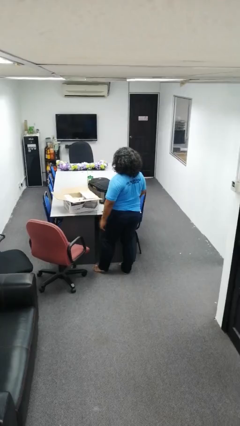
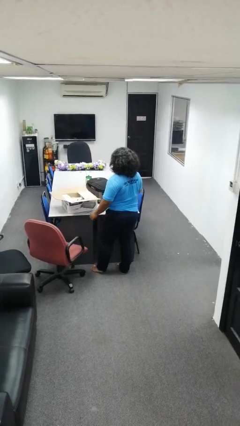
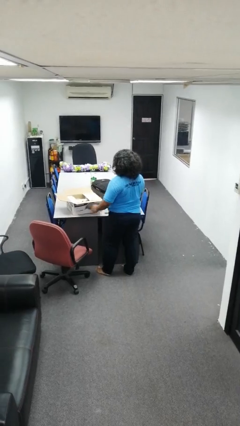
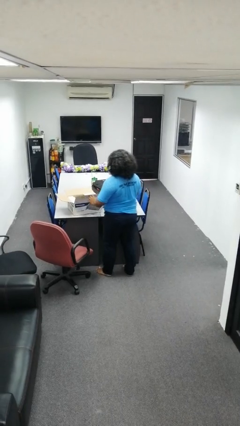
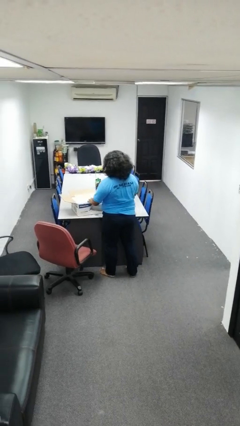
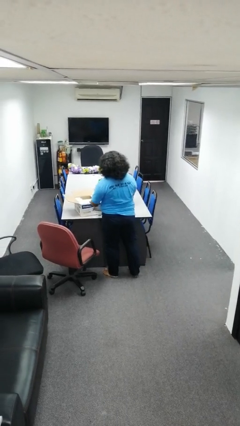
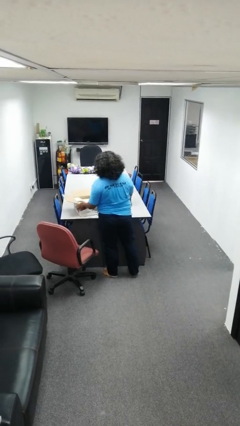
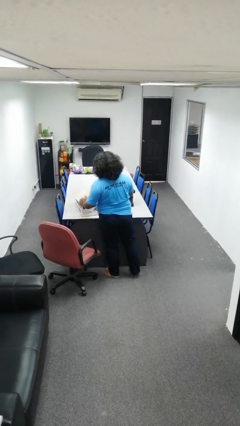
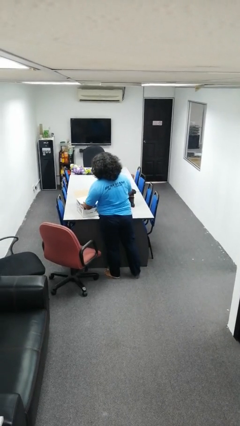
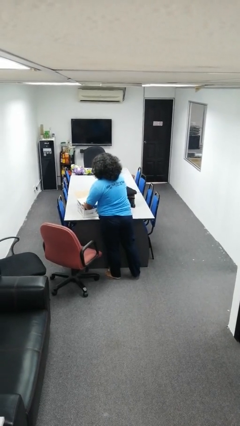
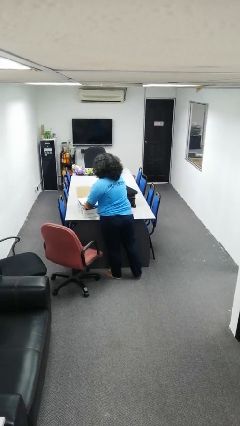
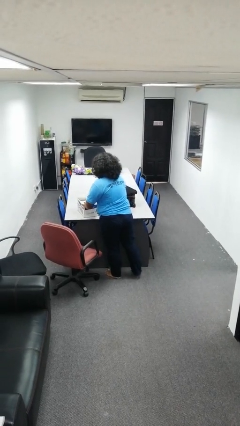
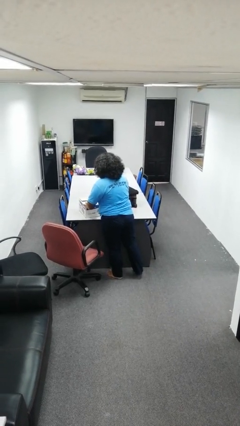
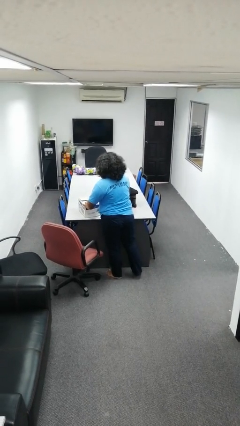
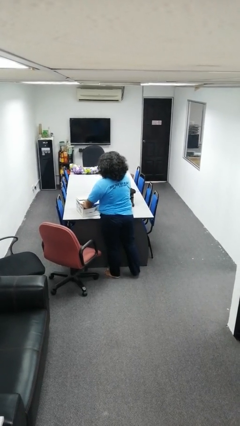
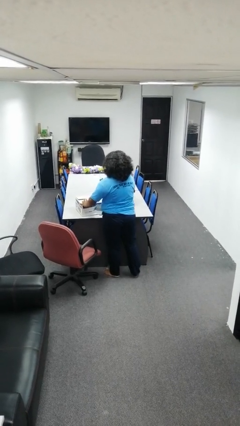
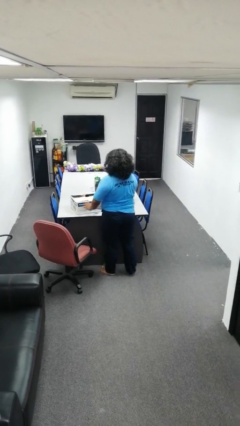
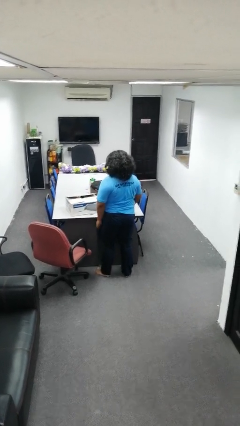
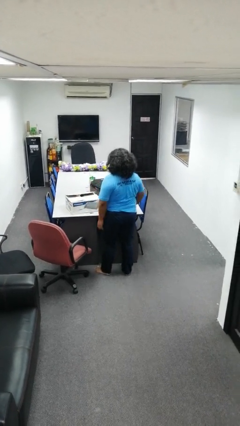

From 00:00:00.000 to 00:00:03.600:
person closes box

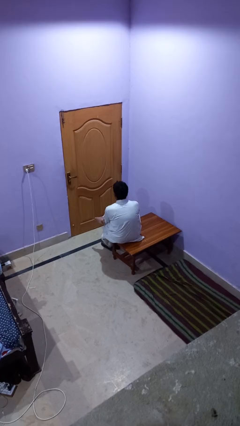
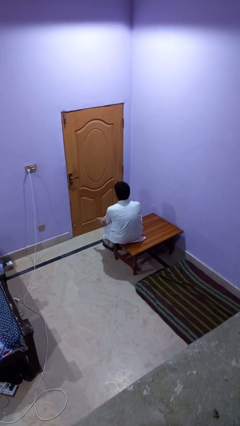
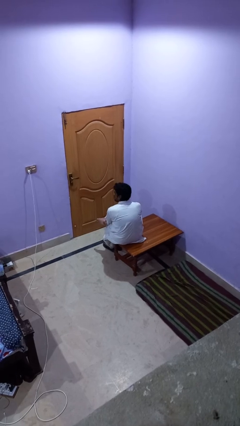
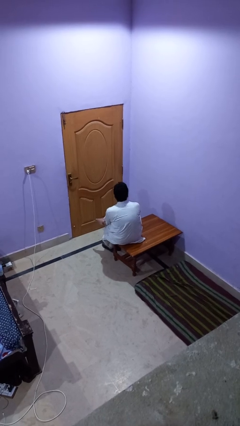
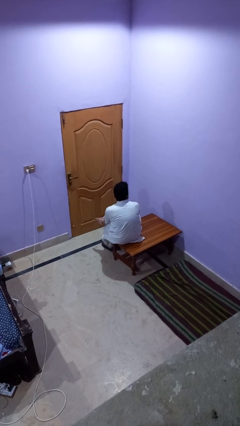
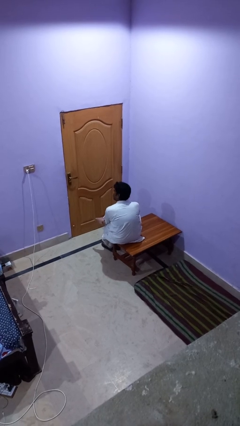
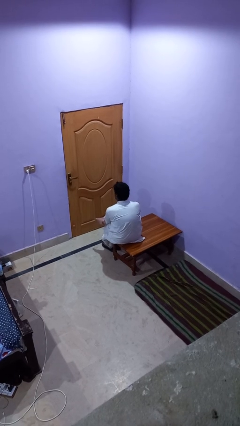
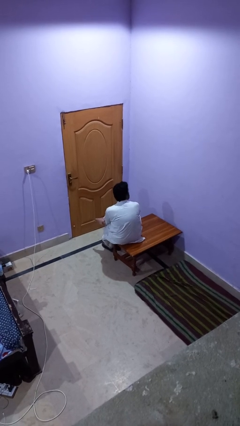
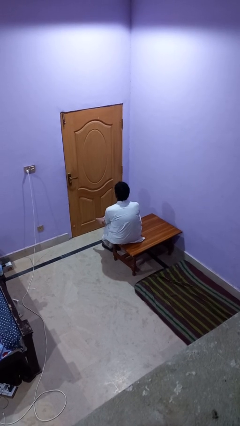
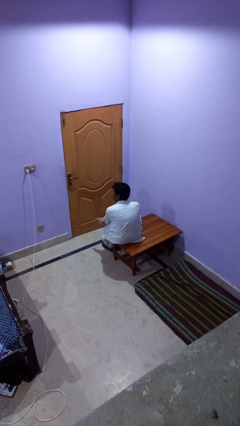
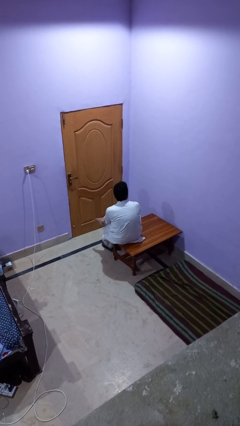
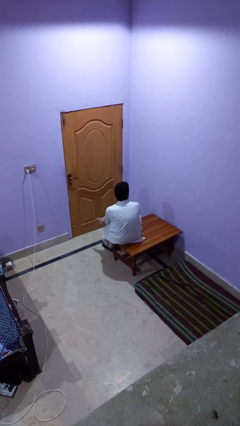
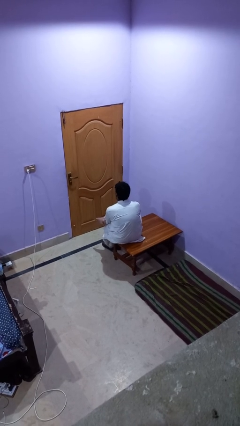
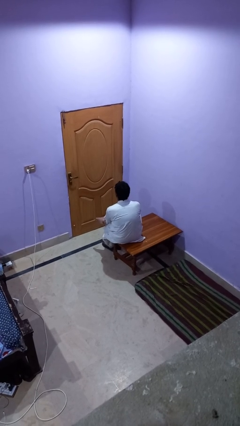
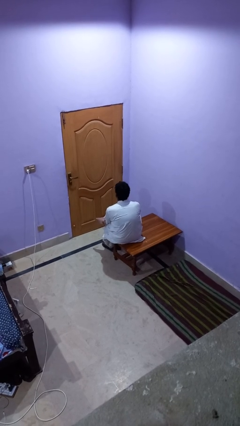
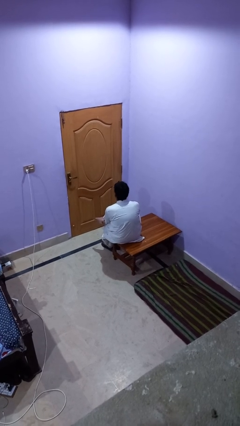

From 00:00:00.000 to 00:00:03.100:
person shakes head

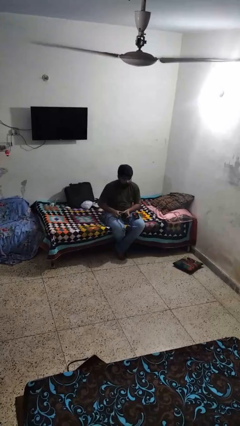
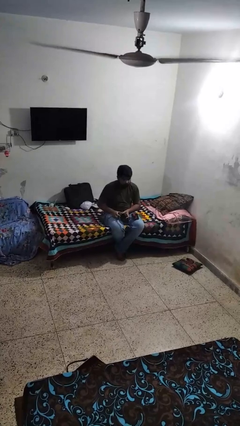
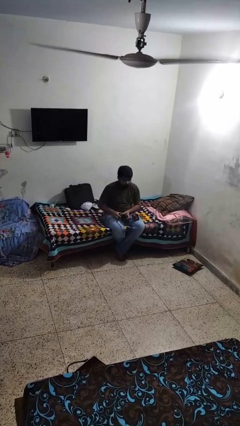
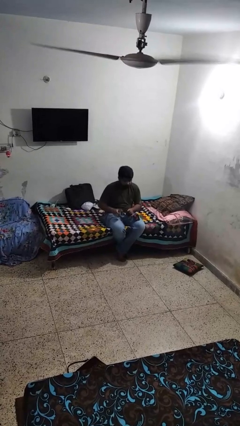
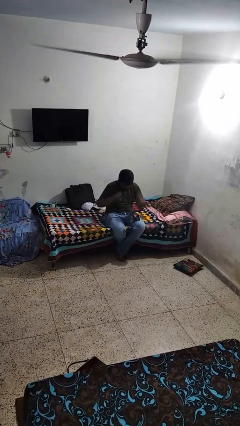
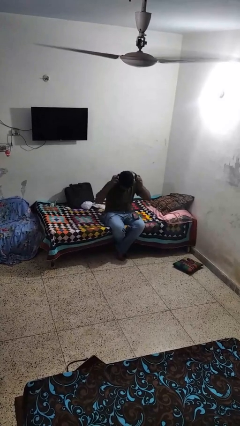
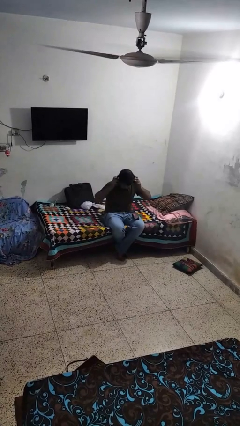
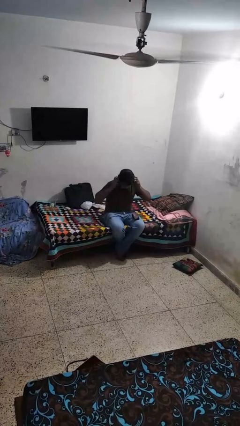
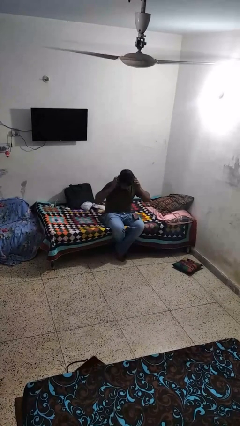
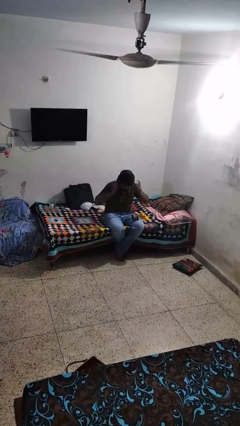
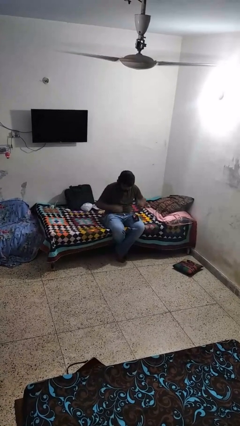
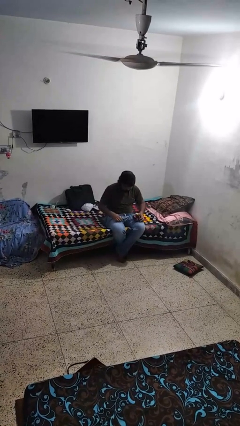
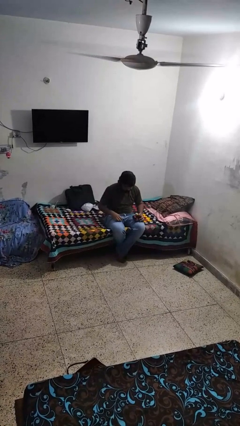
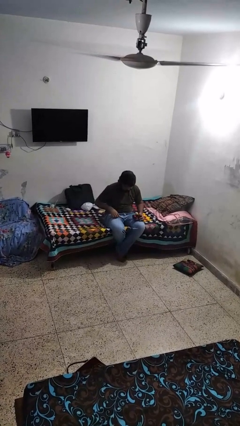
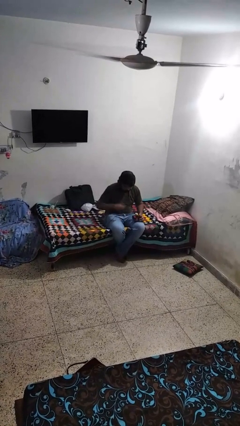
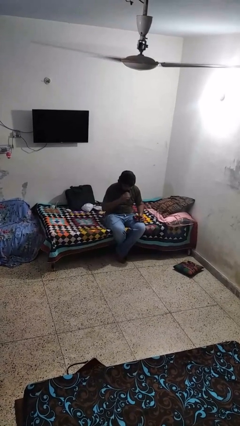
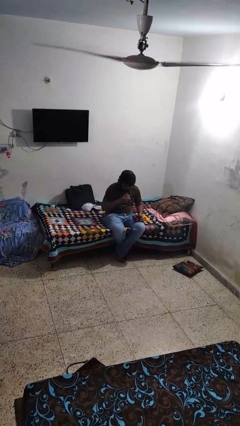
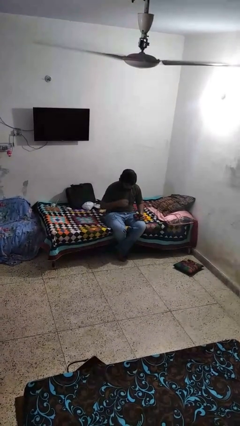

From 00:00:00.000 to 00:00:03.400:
person puts on headphones

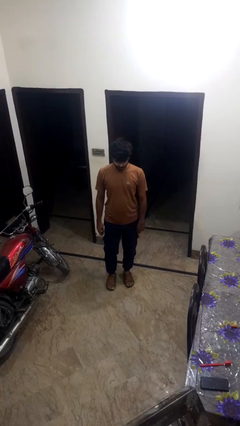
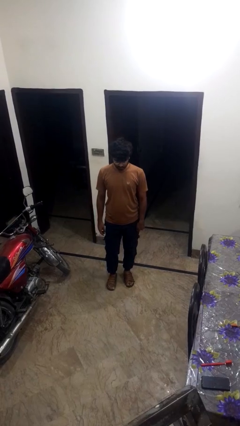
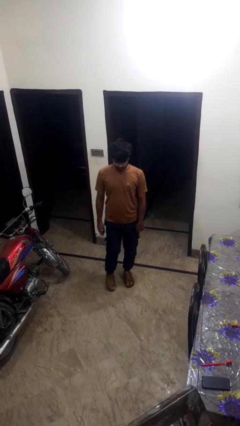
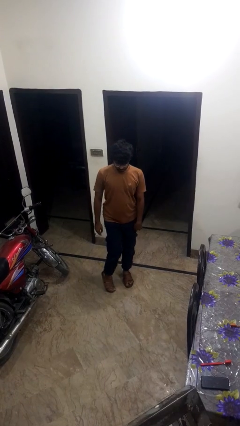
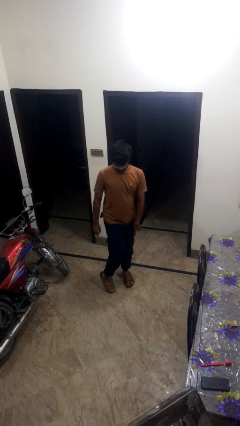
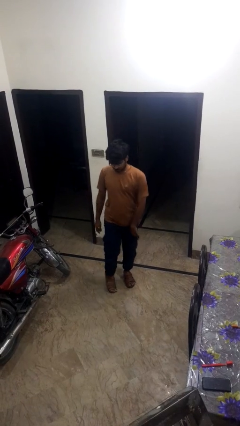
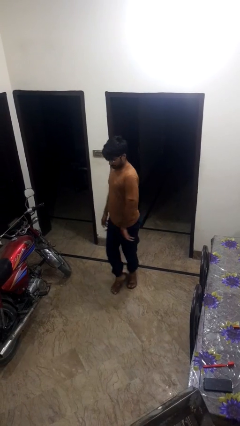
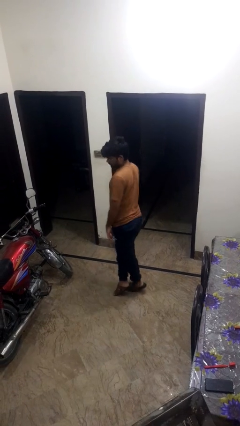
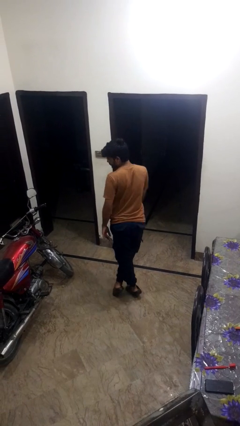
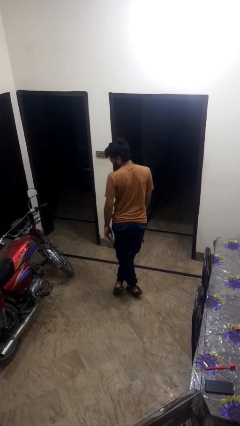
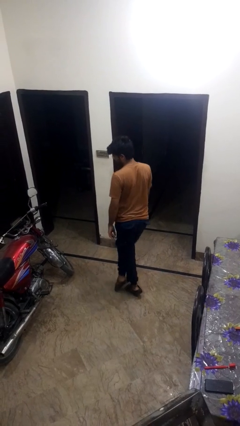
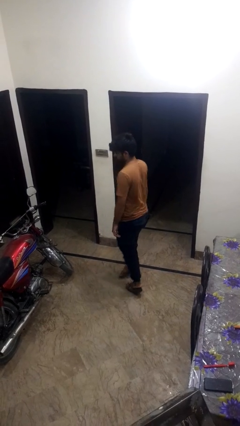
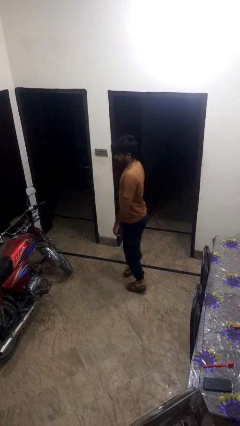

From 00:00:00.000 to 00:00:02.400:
person twirls

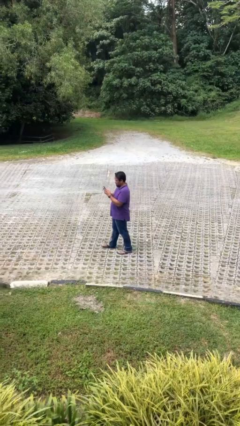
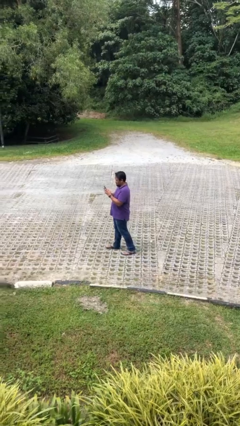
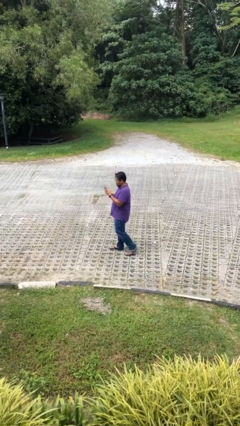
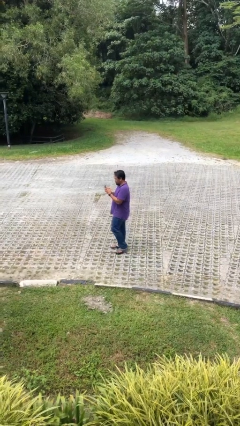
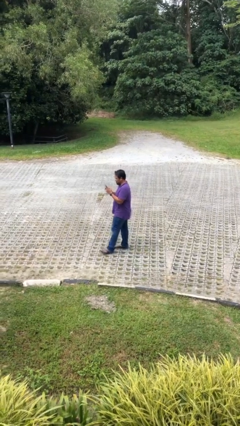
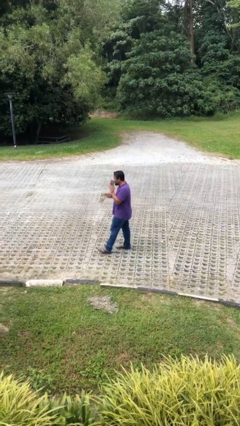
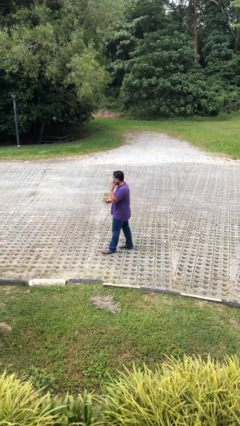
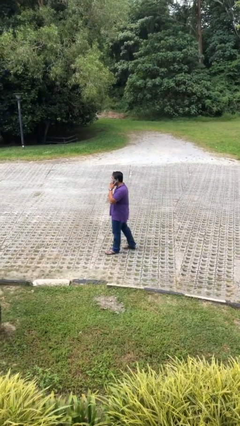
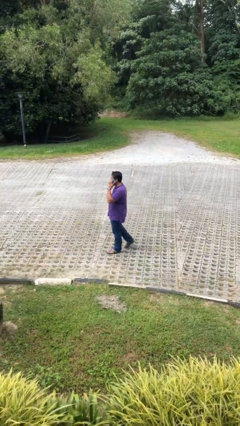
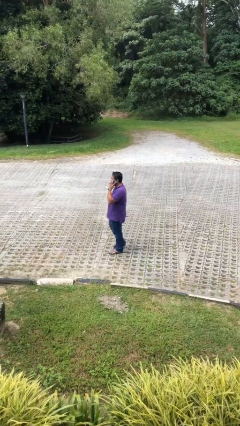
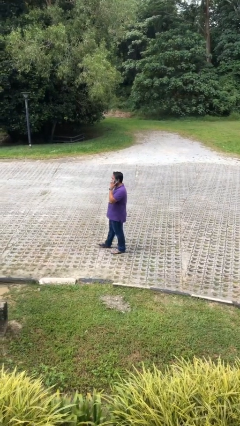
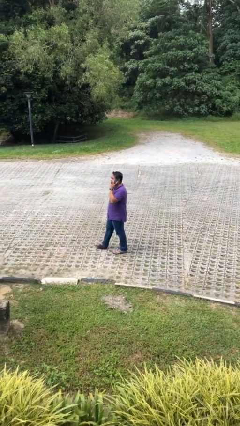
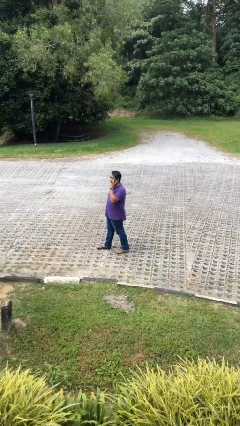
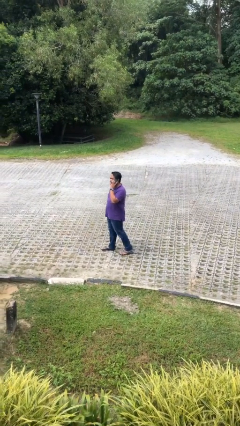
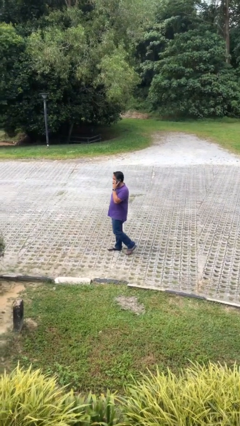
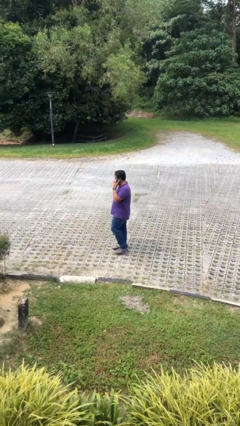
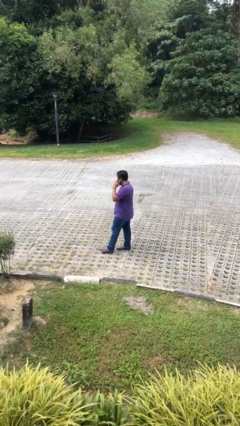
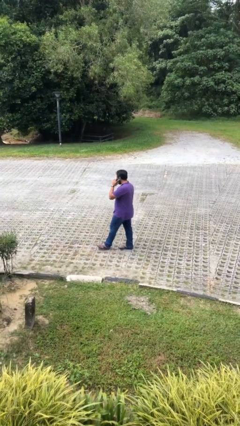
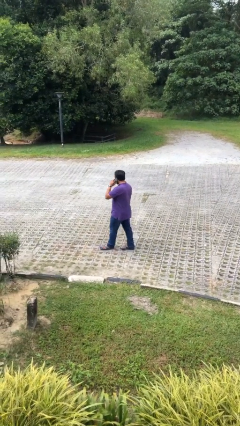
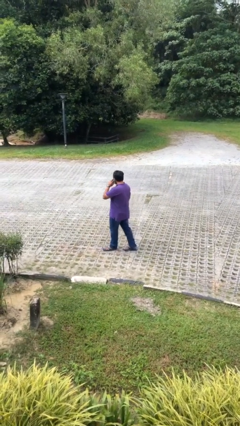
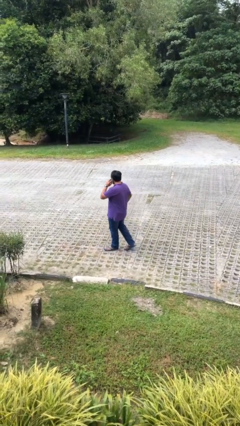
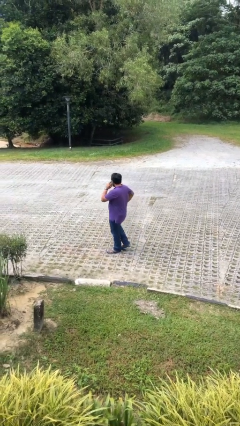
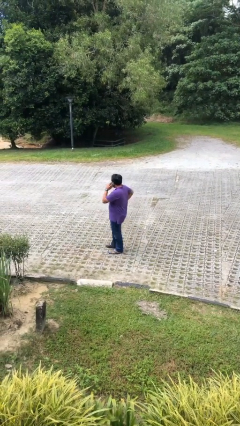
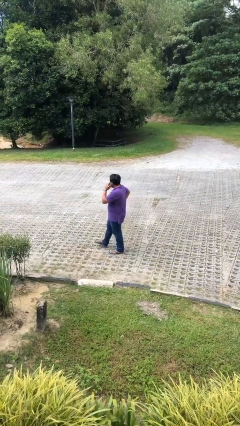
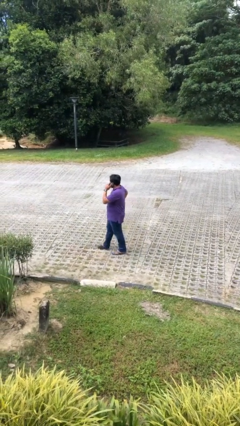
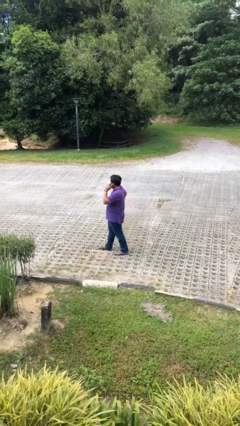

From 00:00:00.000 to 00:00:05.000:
person talks on phone
